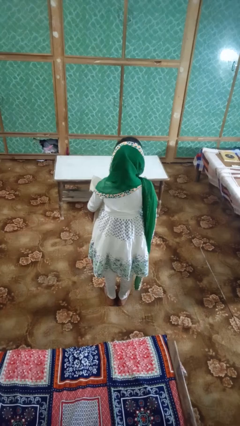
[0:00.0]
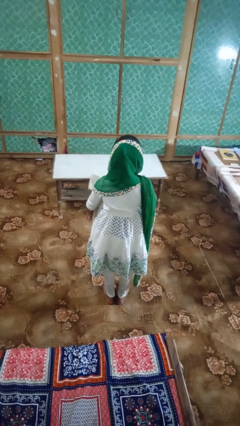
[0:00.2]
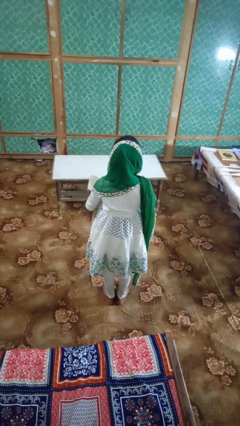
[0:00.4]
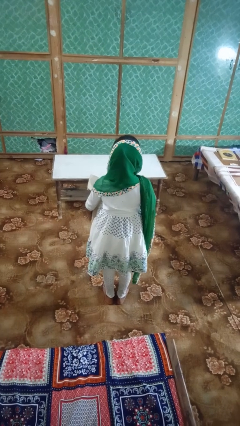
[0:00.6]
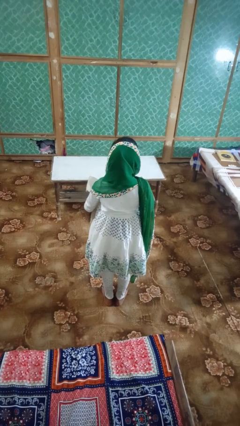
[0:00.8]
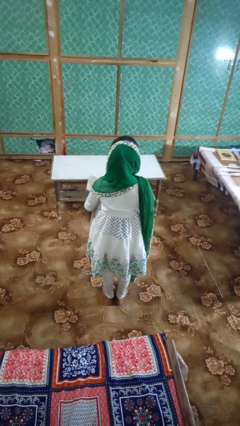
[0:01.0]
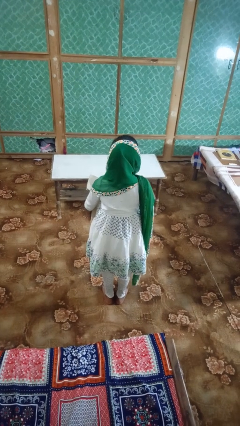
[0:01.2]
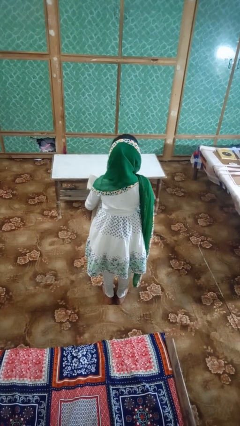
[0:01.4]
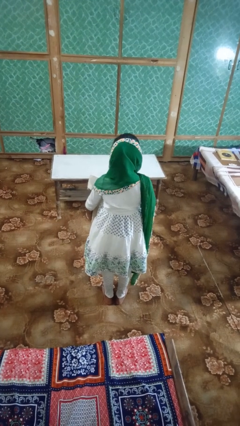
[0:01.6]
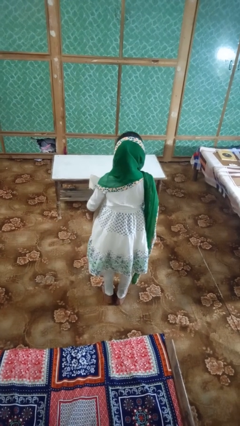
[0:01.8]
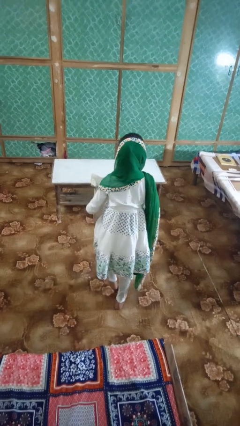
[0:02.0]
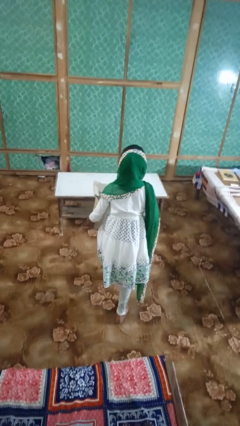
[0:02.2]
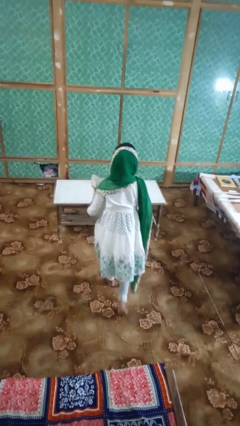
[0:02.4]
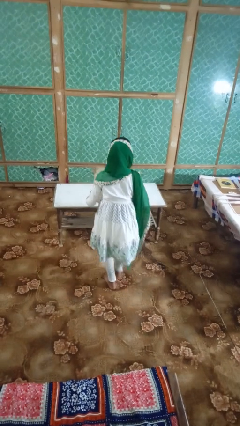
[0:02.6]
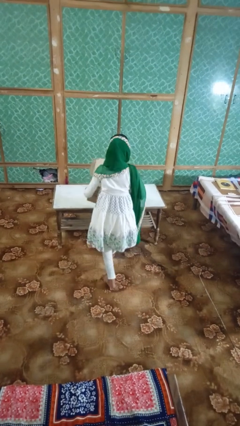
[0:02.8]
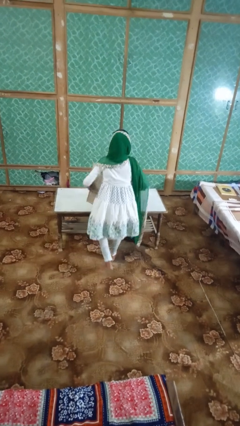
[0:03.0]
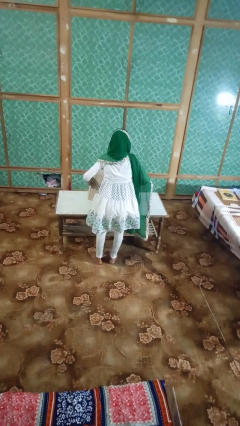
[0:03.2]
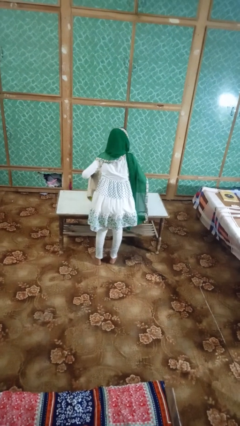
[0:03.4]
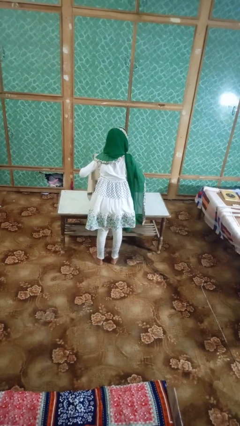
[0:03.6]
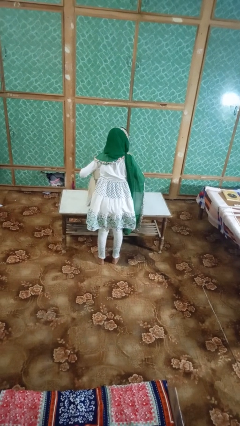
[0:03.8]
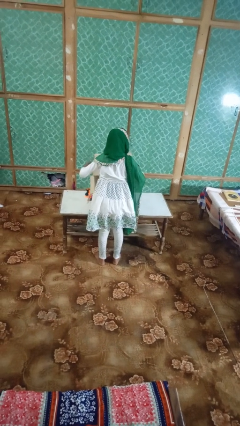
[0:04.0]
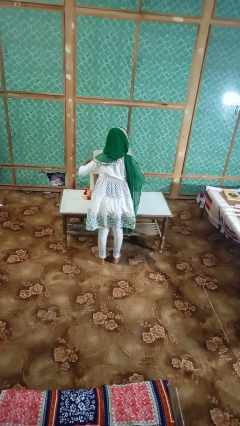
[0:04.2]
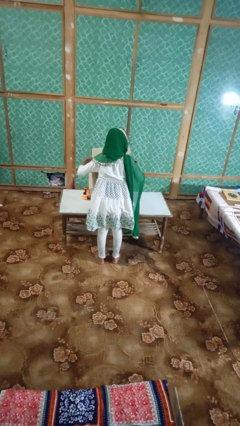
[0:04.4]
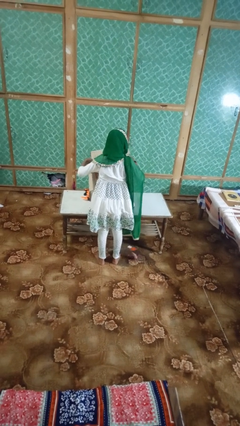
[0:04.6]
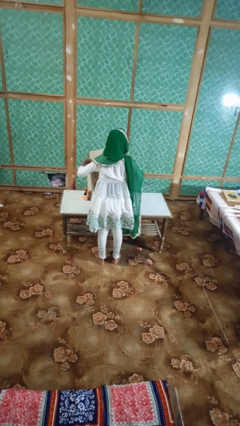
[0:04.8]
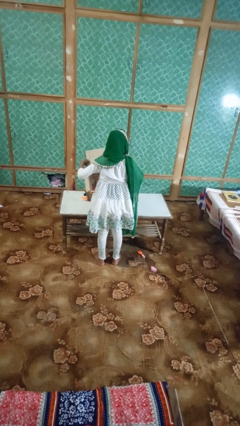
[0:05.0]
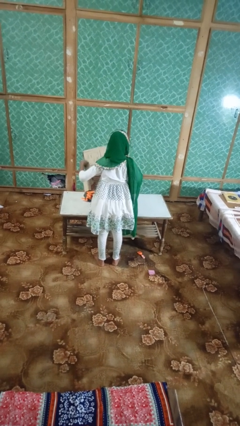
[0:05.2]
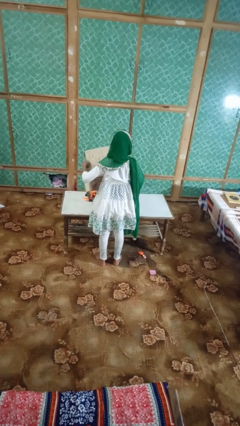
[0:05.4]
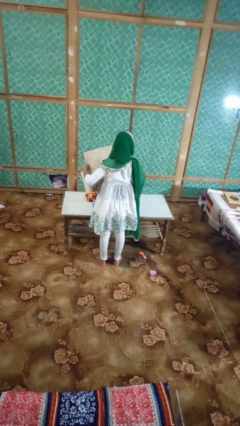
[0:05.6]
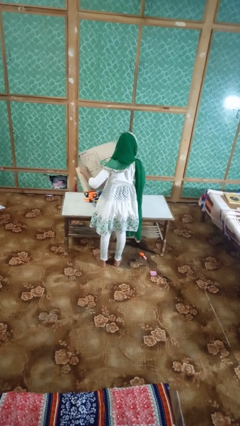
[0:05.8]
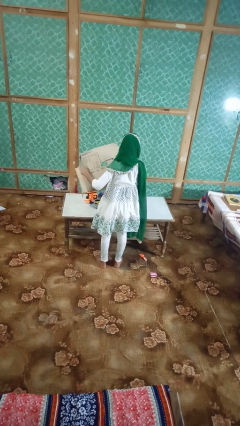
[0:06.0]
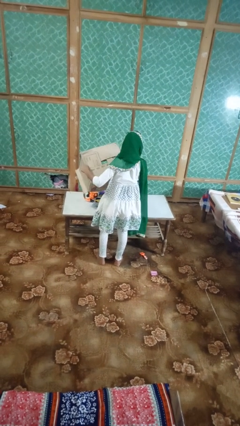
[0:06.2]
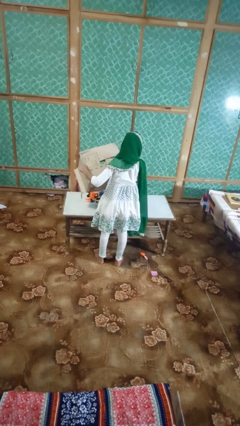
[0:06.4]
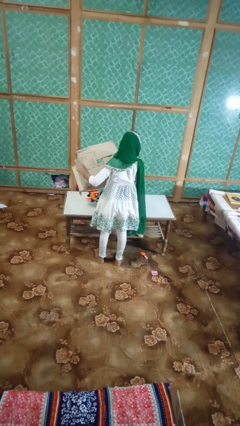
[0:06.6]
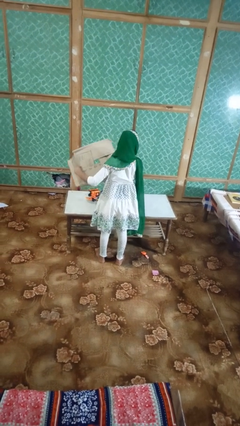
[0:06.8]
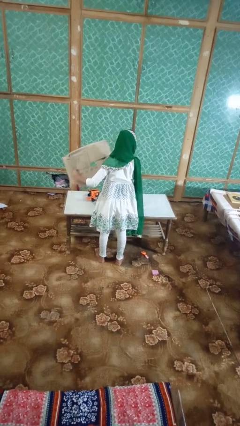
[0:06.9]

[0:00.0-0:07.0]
person unloads box onto table

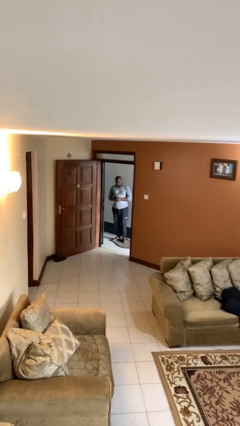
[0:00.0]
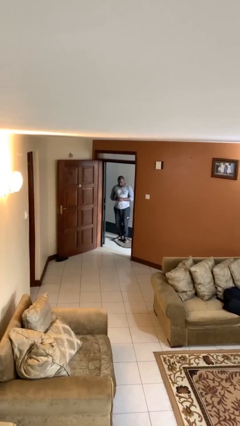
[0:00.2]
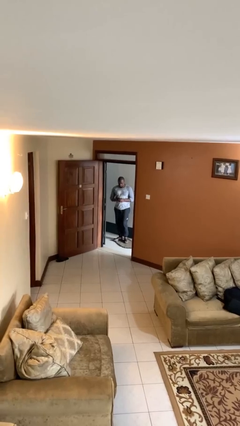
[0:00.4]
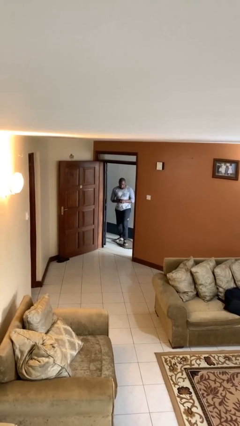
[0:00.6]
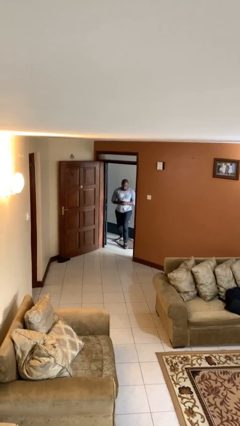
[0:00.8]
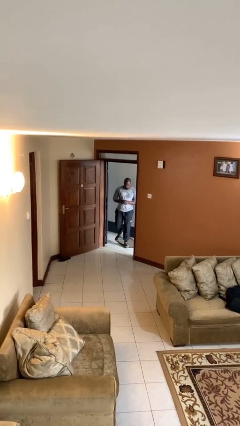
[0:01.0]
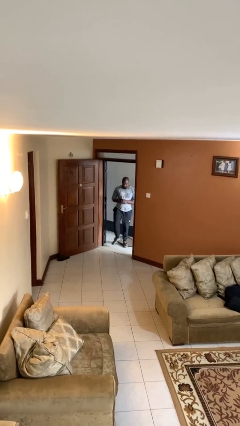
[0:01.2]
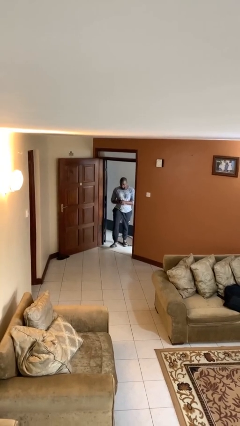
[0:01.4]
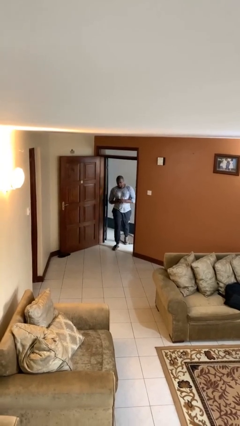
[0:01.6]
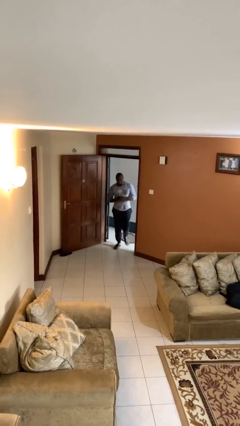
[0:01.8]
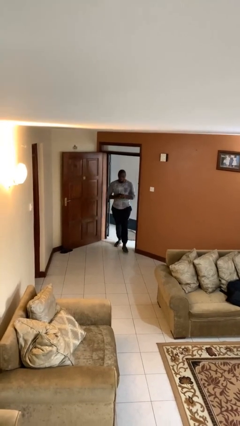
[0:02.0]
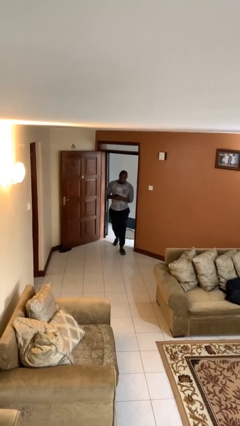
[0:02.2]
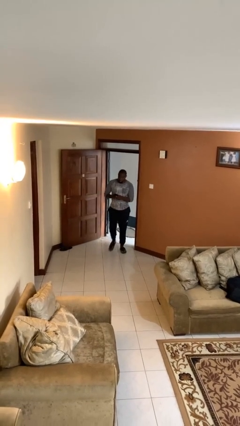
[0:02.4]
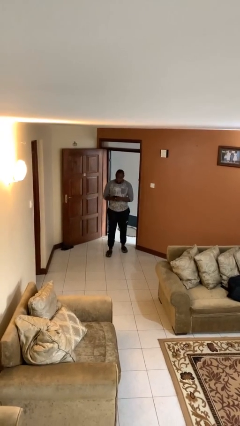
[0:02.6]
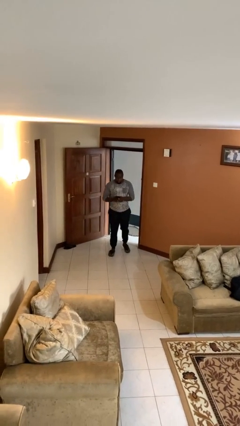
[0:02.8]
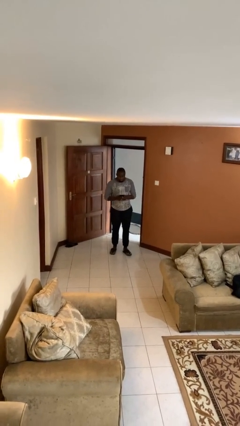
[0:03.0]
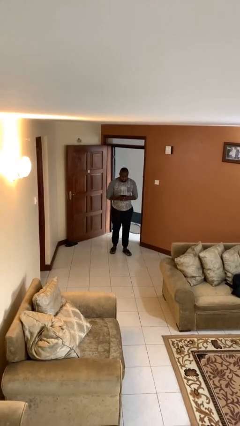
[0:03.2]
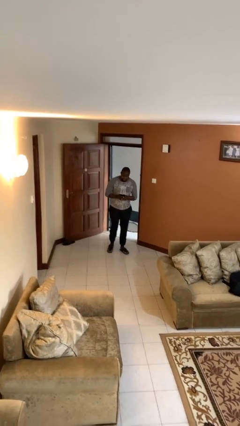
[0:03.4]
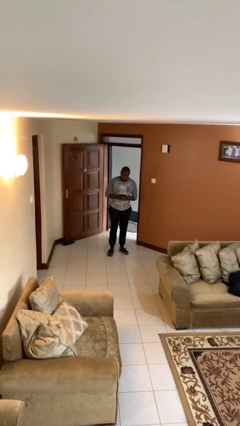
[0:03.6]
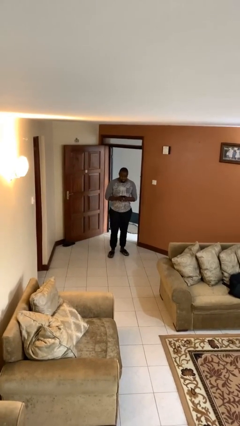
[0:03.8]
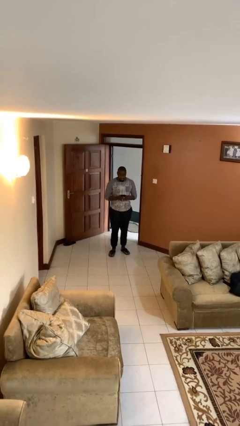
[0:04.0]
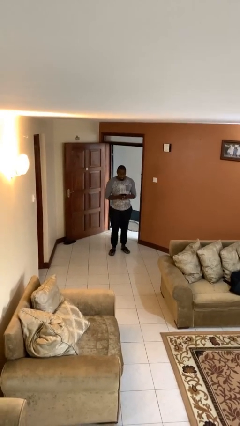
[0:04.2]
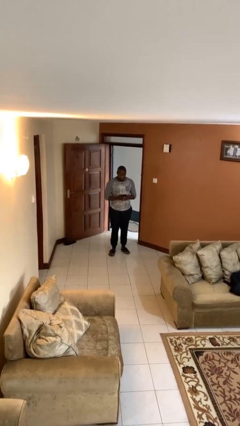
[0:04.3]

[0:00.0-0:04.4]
person enters scene through structure

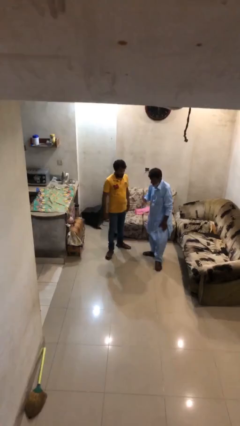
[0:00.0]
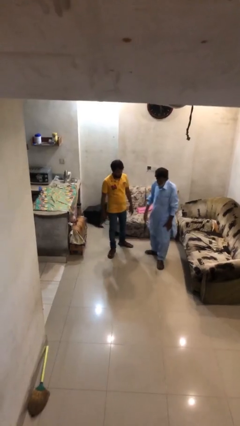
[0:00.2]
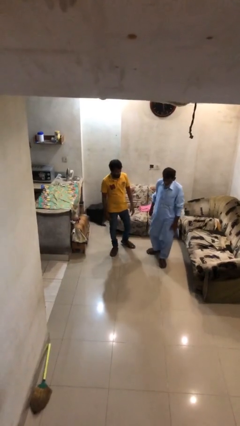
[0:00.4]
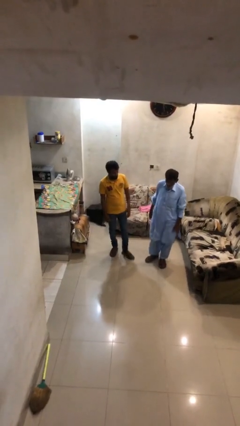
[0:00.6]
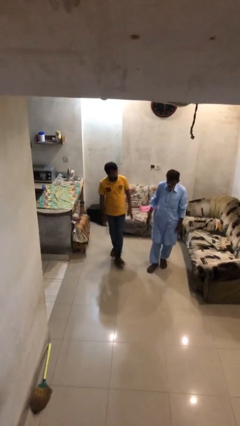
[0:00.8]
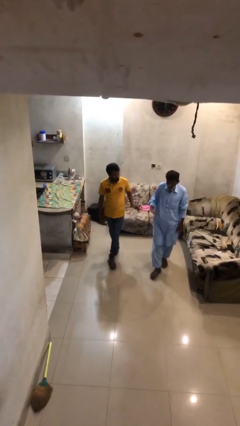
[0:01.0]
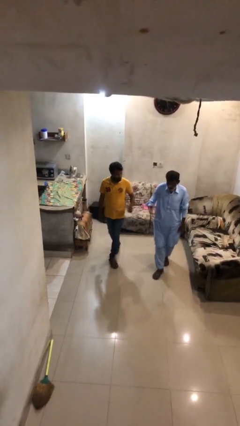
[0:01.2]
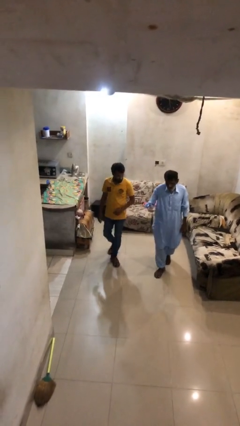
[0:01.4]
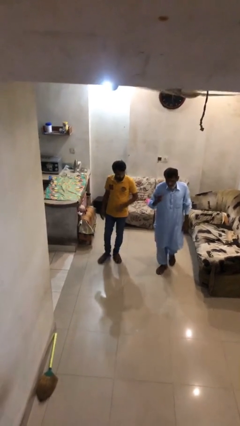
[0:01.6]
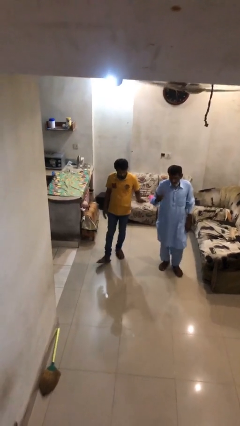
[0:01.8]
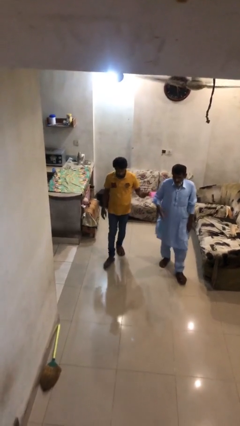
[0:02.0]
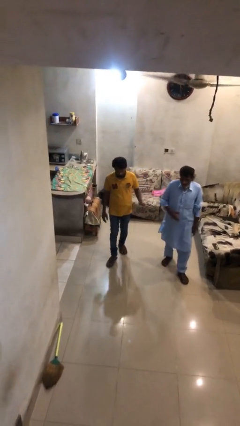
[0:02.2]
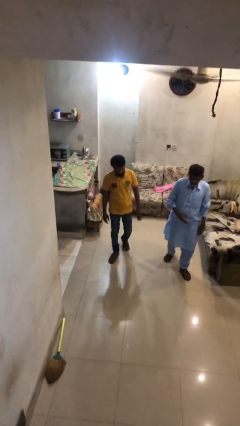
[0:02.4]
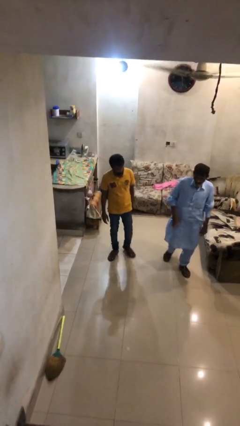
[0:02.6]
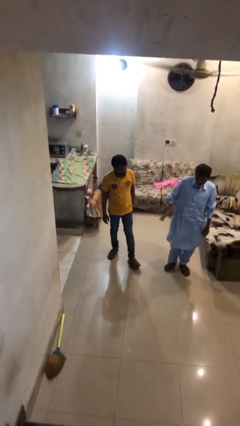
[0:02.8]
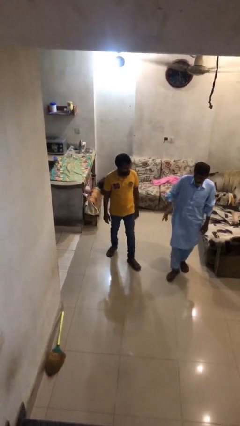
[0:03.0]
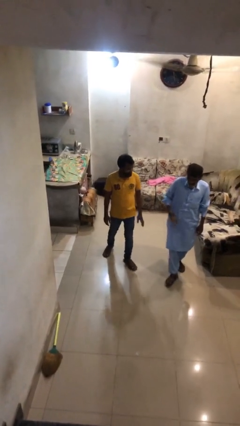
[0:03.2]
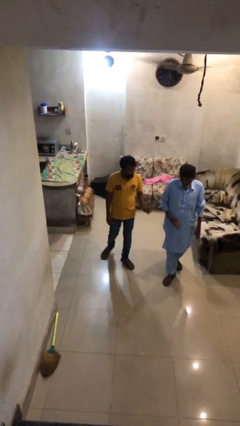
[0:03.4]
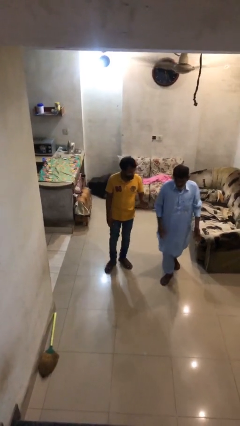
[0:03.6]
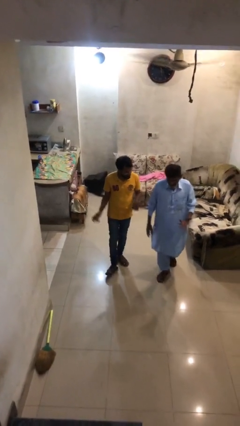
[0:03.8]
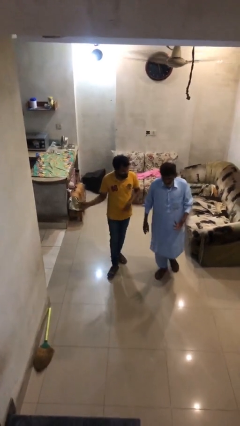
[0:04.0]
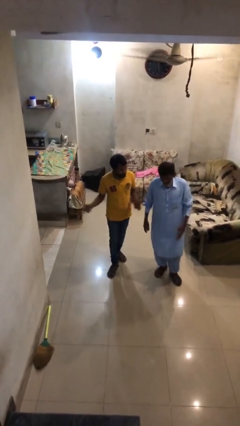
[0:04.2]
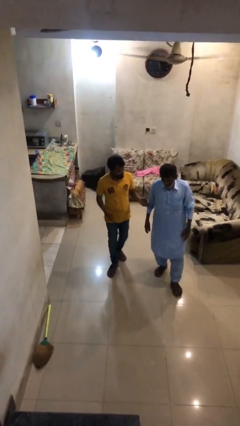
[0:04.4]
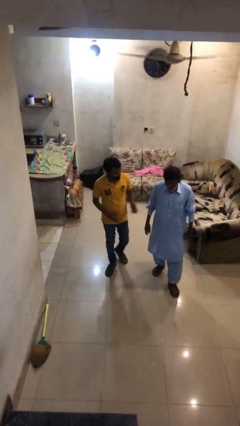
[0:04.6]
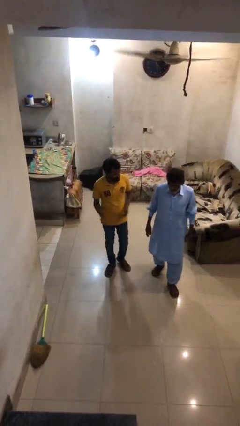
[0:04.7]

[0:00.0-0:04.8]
person talks to person

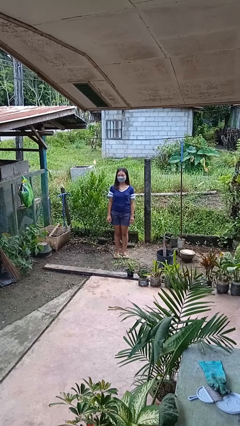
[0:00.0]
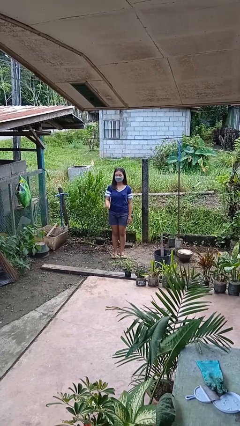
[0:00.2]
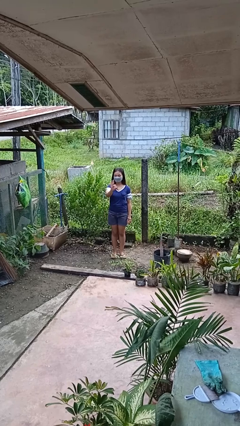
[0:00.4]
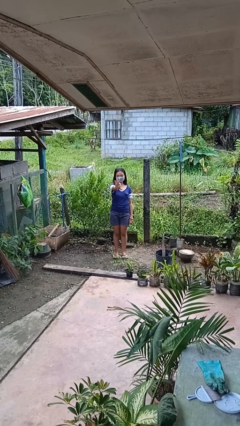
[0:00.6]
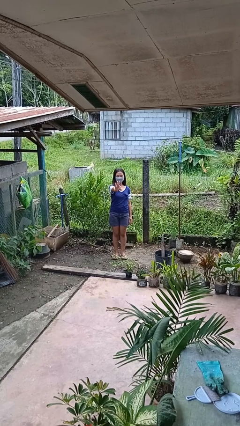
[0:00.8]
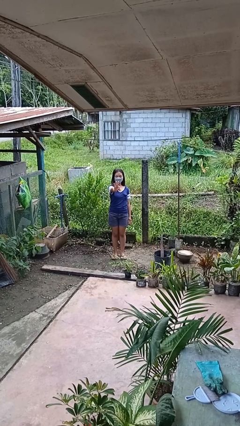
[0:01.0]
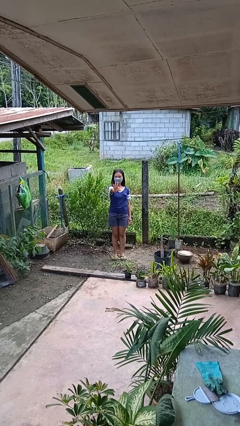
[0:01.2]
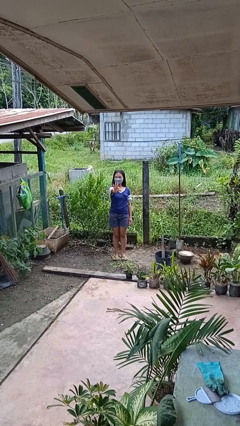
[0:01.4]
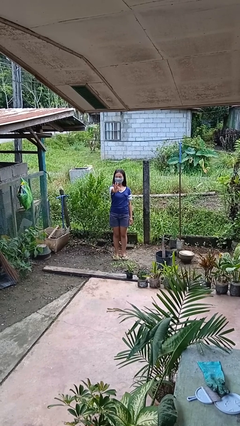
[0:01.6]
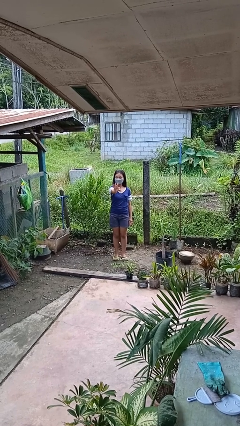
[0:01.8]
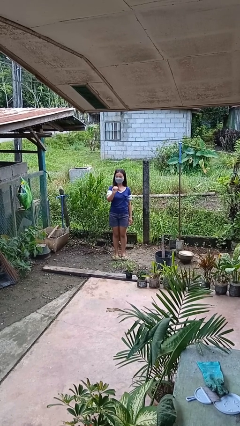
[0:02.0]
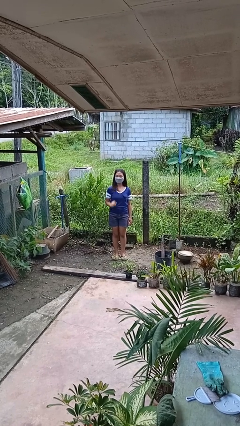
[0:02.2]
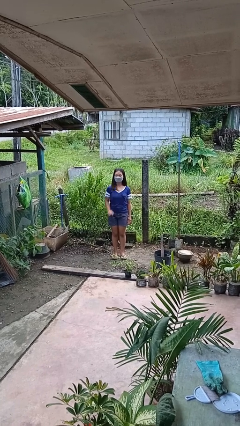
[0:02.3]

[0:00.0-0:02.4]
person gestures number three
